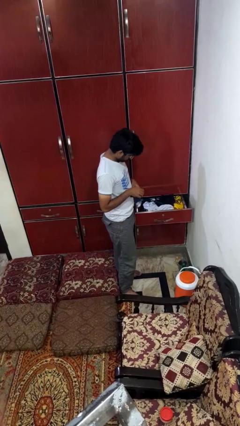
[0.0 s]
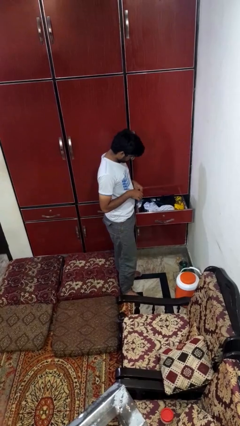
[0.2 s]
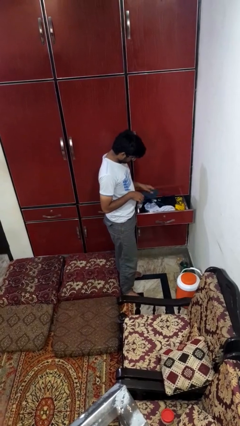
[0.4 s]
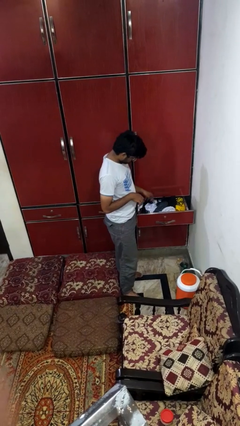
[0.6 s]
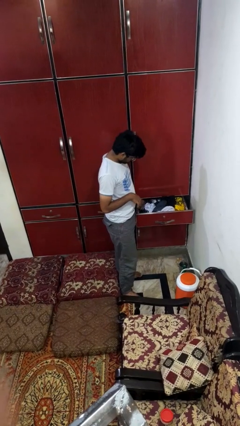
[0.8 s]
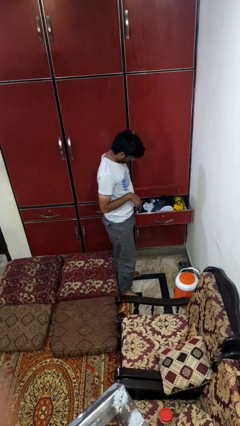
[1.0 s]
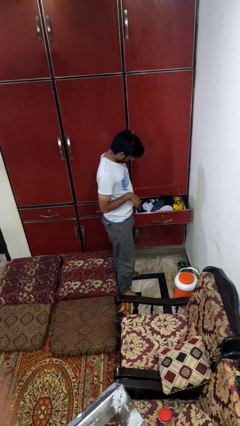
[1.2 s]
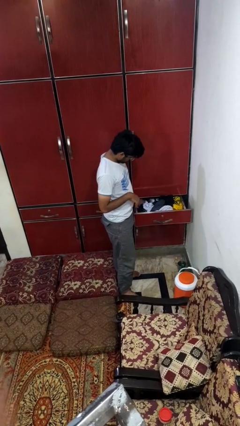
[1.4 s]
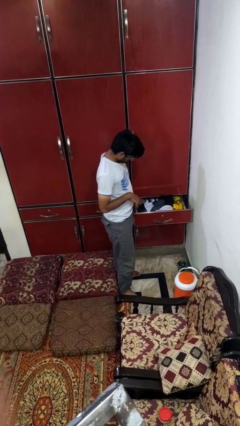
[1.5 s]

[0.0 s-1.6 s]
person puts clothes into dresser

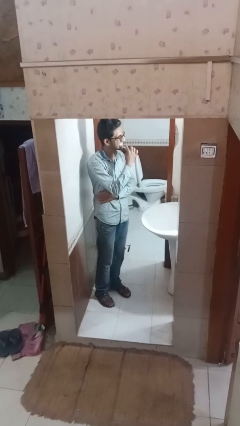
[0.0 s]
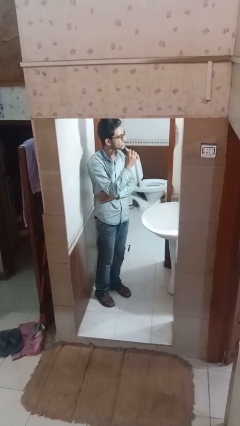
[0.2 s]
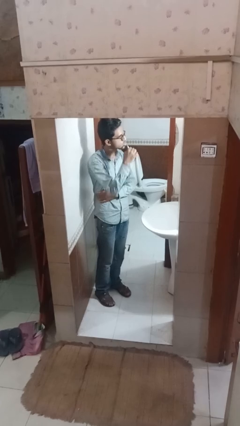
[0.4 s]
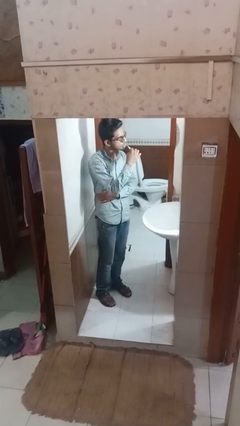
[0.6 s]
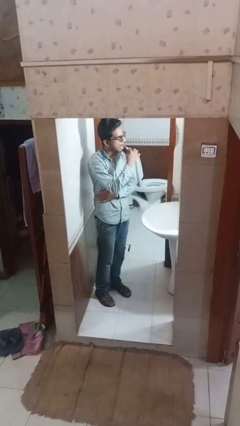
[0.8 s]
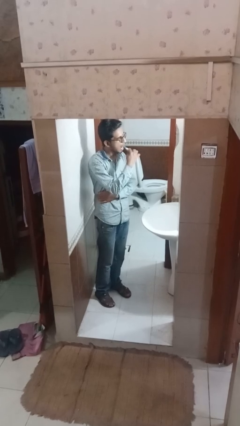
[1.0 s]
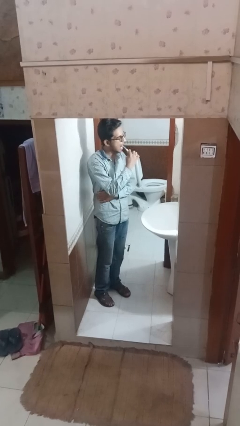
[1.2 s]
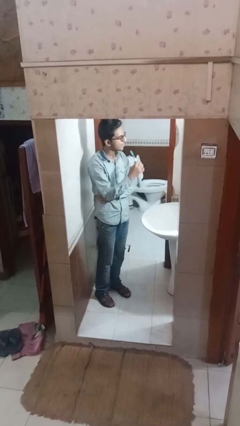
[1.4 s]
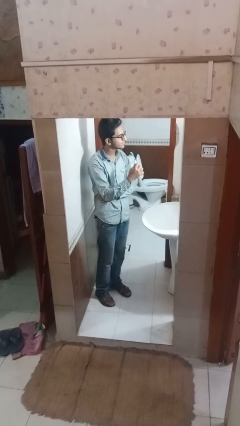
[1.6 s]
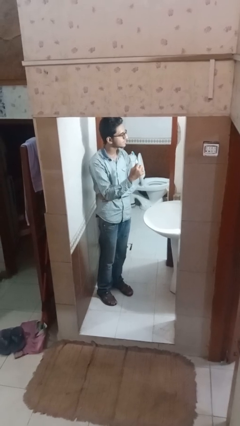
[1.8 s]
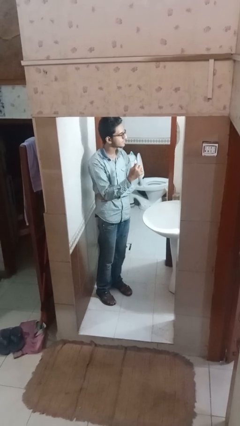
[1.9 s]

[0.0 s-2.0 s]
person brushes teeth

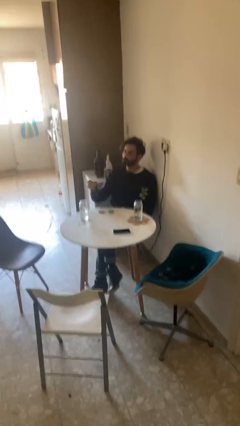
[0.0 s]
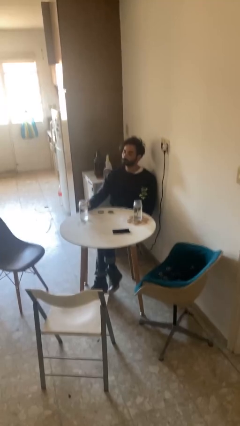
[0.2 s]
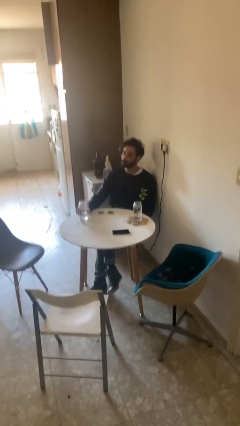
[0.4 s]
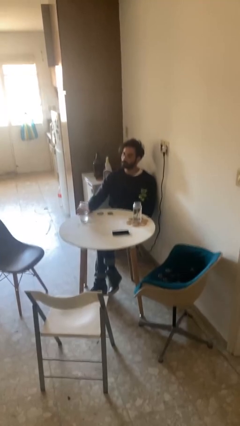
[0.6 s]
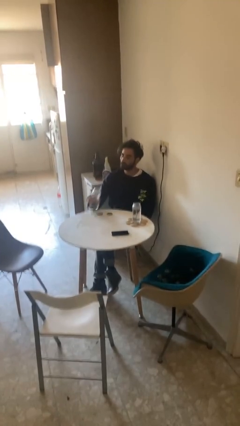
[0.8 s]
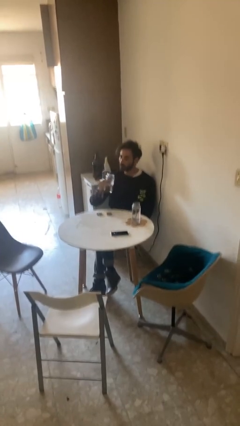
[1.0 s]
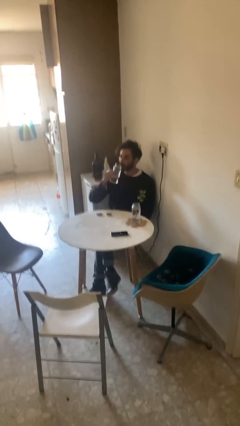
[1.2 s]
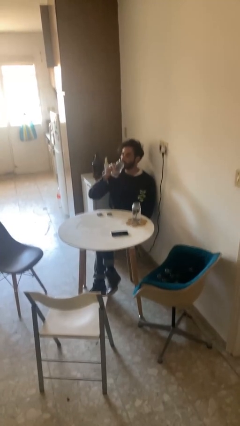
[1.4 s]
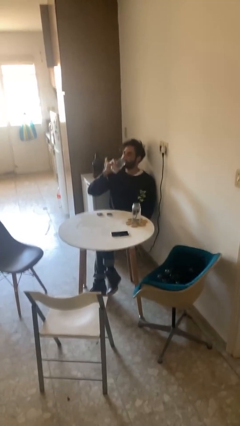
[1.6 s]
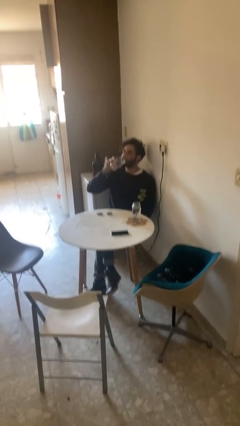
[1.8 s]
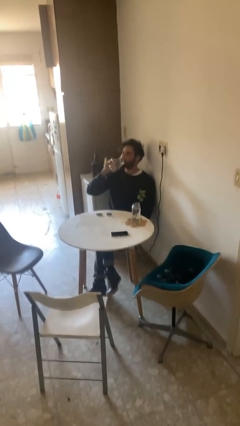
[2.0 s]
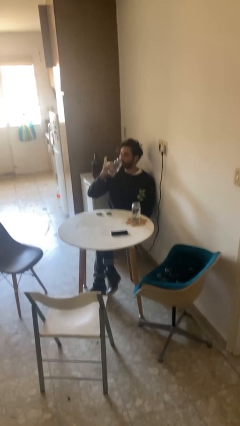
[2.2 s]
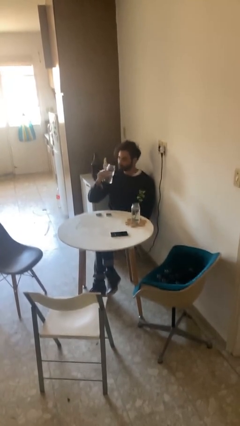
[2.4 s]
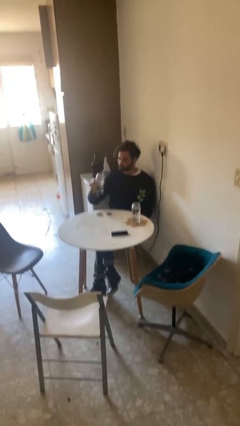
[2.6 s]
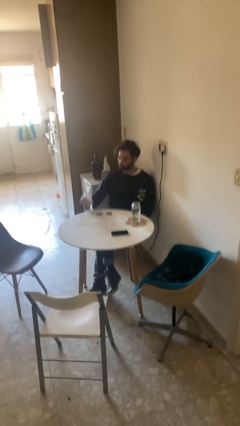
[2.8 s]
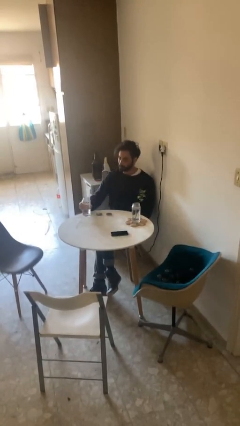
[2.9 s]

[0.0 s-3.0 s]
person drinks from cup

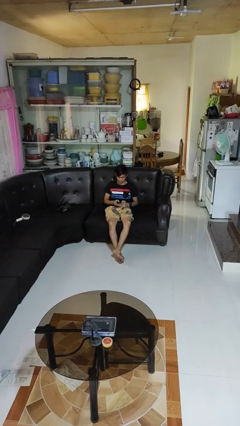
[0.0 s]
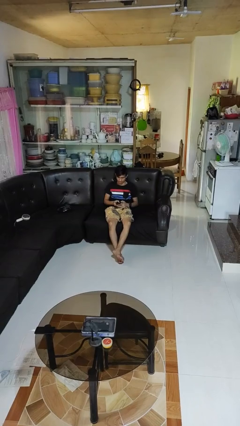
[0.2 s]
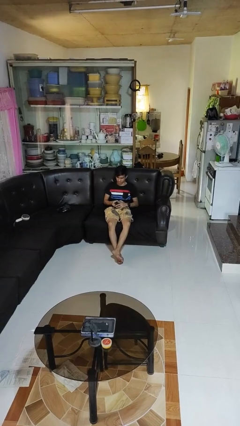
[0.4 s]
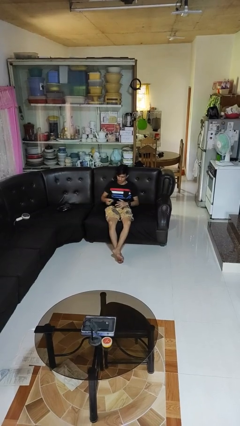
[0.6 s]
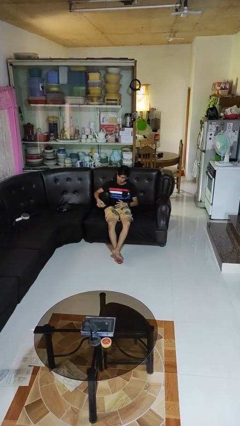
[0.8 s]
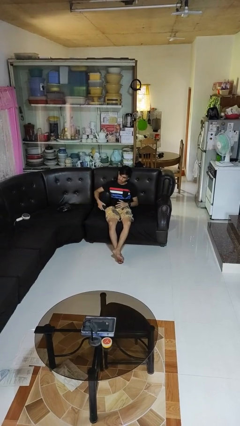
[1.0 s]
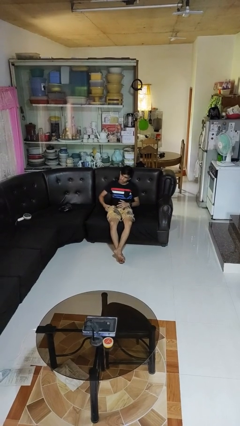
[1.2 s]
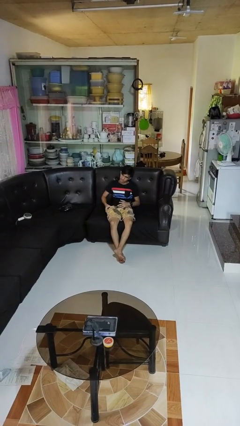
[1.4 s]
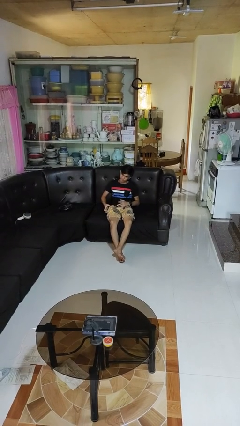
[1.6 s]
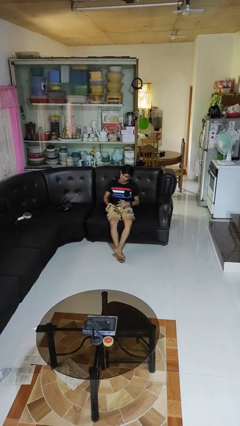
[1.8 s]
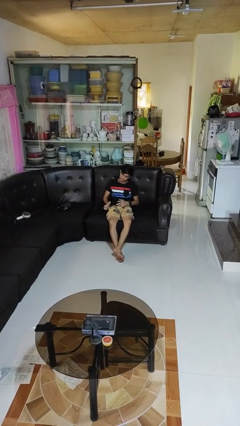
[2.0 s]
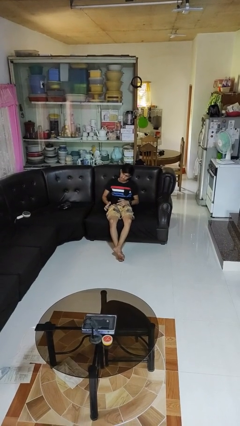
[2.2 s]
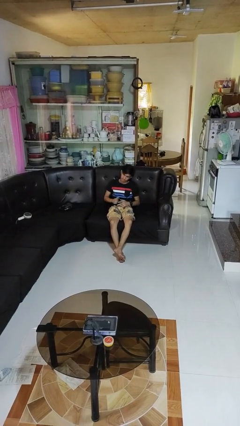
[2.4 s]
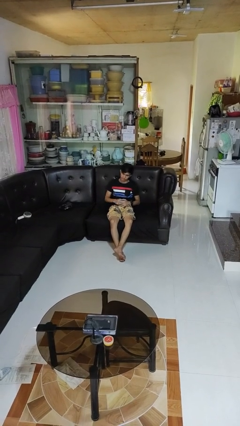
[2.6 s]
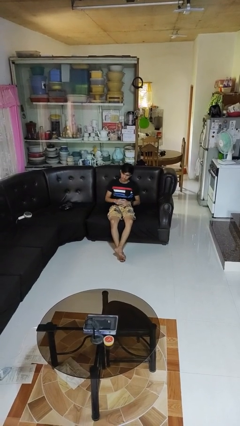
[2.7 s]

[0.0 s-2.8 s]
person puts phone into pocket

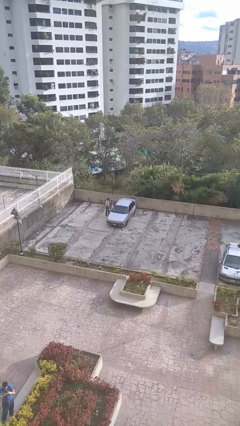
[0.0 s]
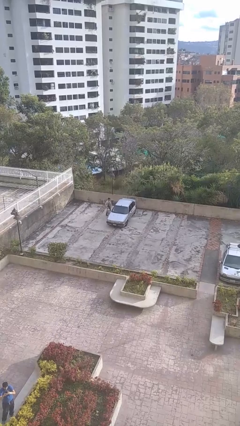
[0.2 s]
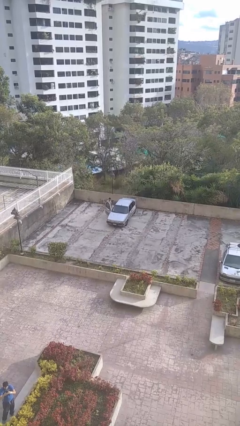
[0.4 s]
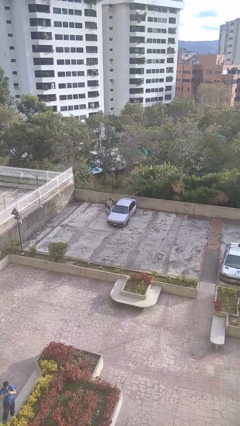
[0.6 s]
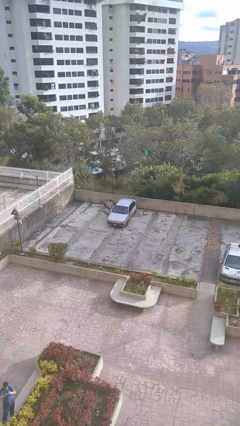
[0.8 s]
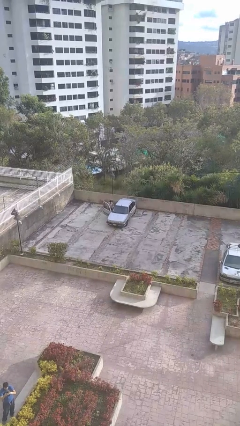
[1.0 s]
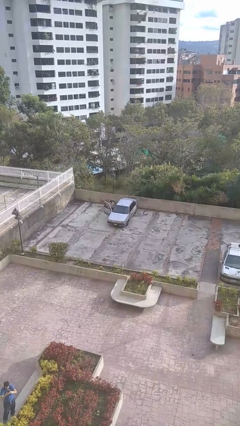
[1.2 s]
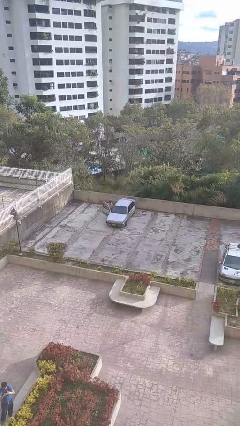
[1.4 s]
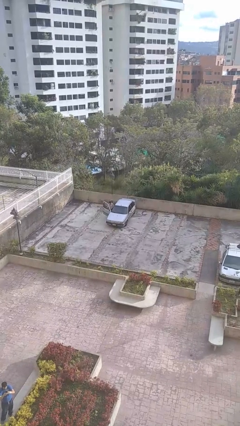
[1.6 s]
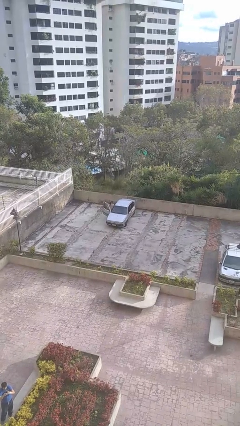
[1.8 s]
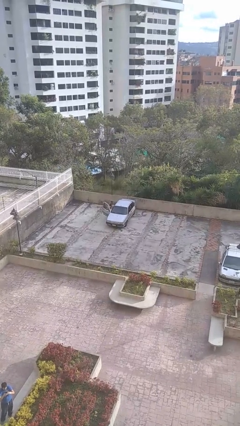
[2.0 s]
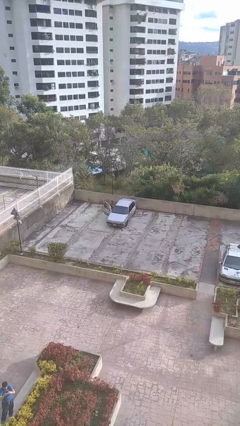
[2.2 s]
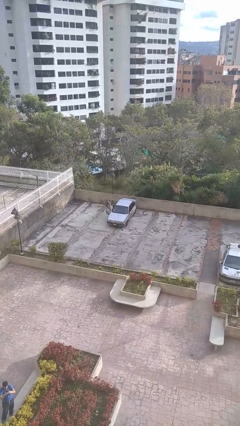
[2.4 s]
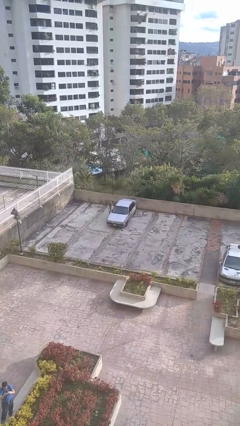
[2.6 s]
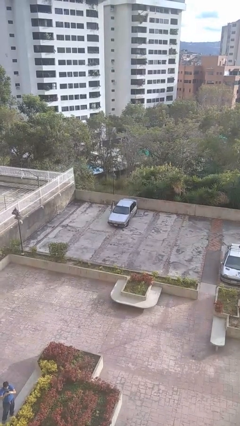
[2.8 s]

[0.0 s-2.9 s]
car picks up person

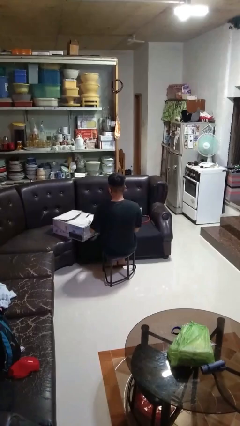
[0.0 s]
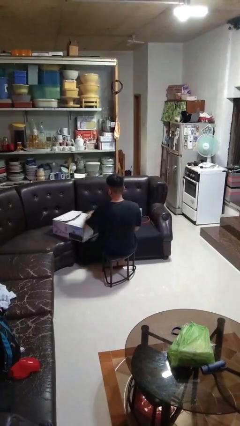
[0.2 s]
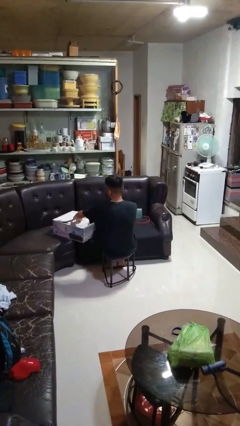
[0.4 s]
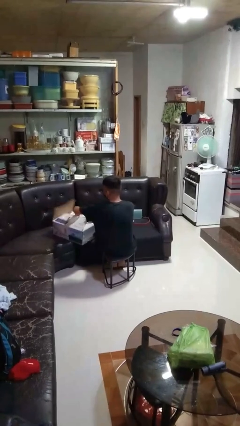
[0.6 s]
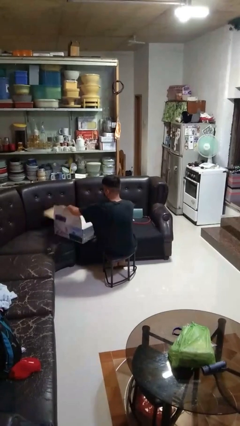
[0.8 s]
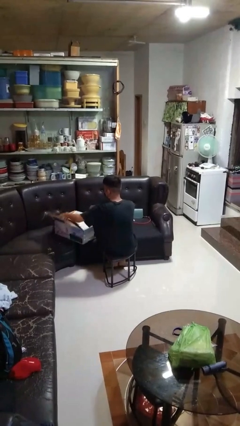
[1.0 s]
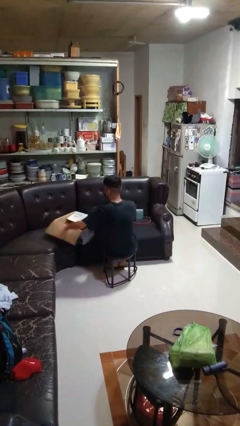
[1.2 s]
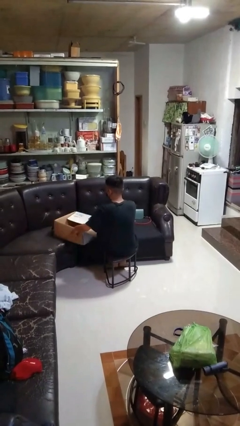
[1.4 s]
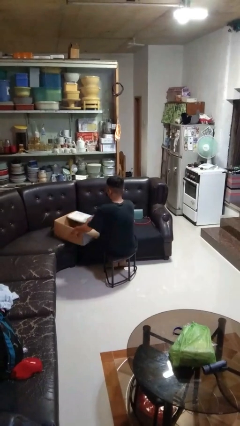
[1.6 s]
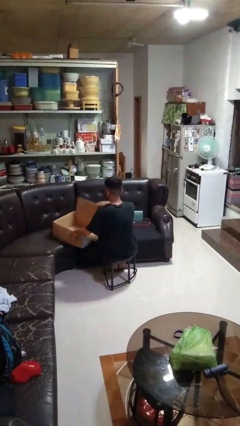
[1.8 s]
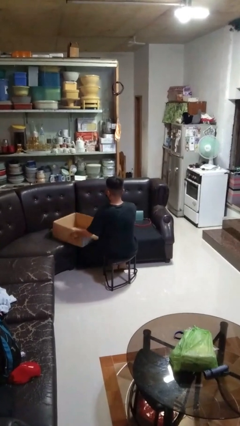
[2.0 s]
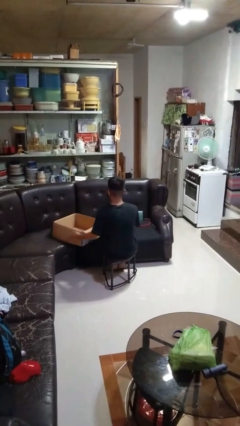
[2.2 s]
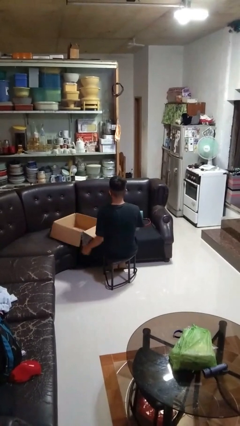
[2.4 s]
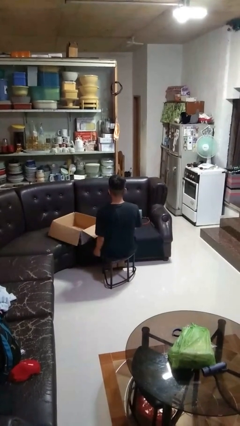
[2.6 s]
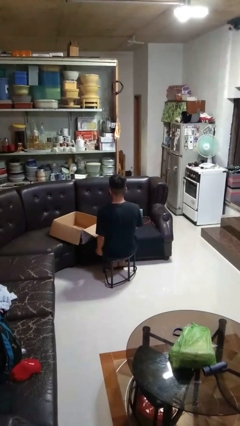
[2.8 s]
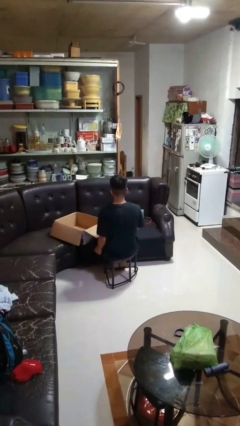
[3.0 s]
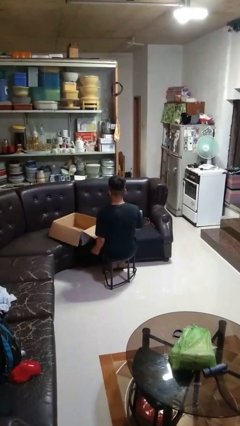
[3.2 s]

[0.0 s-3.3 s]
person opens box

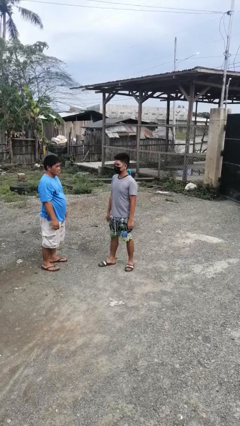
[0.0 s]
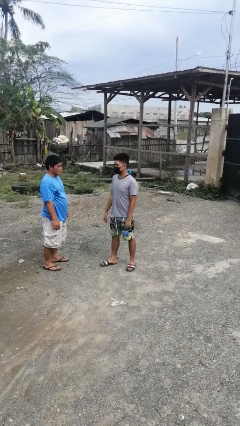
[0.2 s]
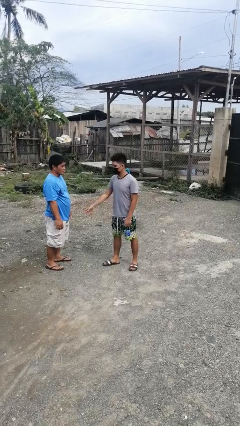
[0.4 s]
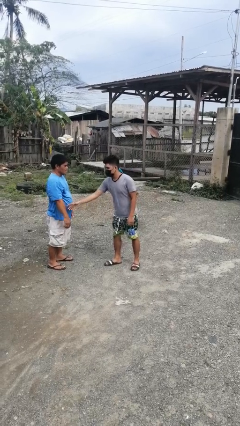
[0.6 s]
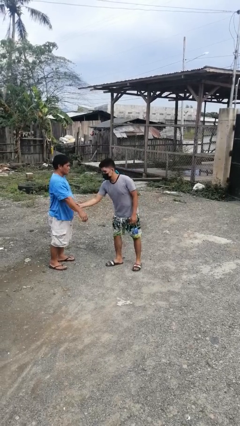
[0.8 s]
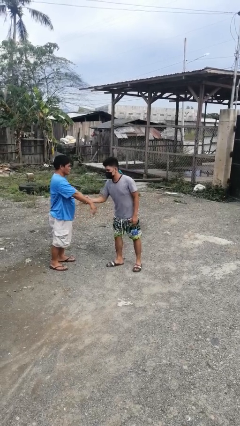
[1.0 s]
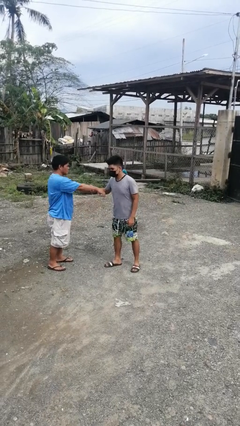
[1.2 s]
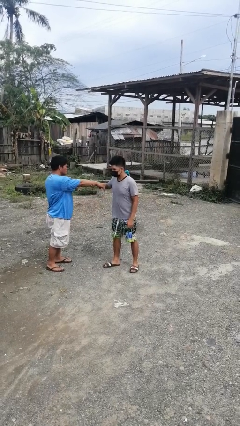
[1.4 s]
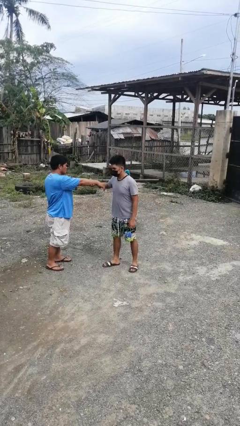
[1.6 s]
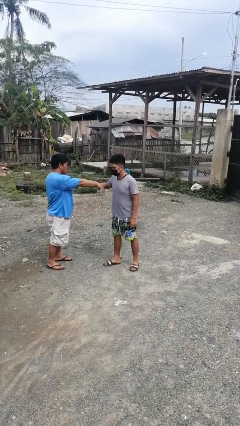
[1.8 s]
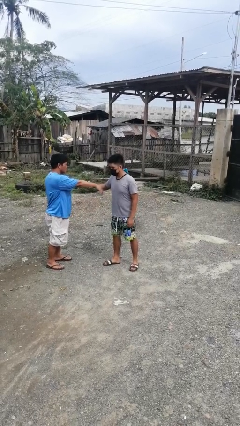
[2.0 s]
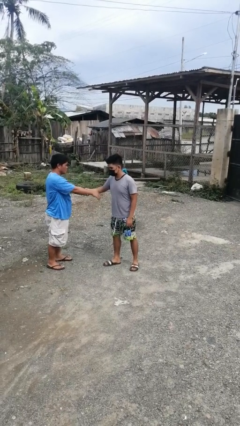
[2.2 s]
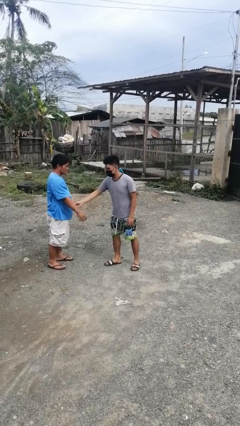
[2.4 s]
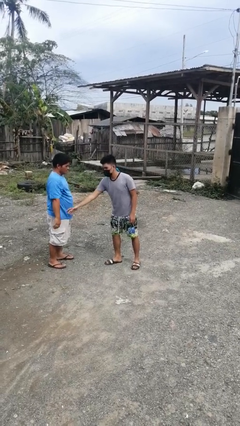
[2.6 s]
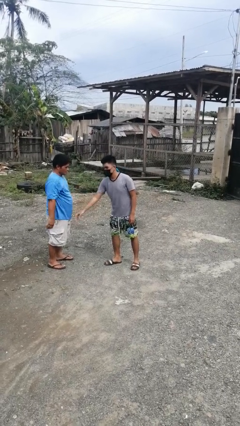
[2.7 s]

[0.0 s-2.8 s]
person grabs person by forearm
